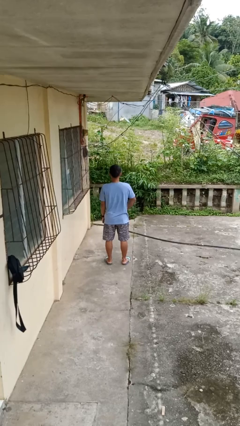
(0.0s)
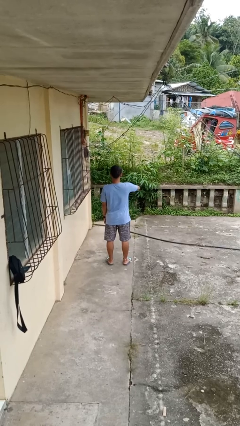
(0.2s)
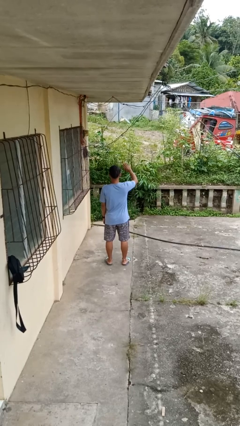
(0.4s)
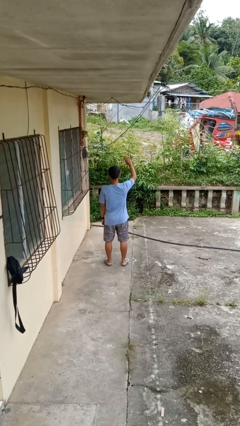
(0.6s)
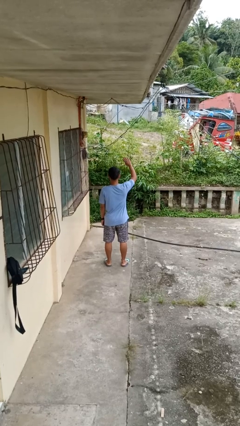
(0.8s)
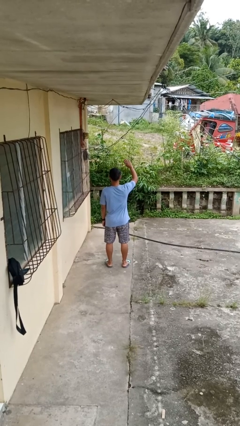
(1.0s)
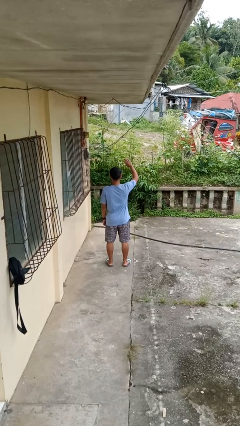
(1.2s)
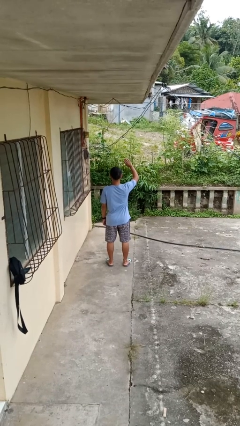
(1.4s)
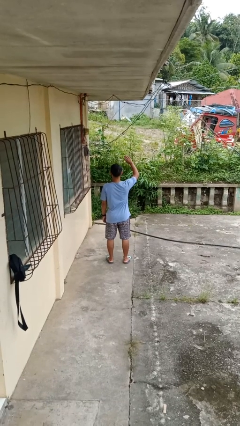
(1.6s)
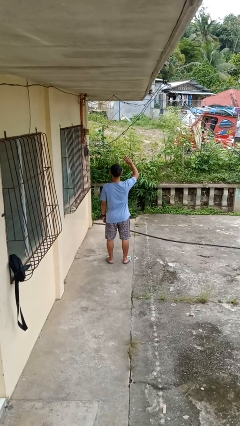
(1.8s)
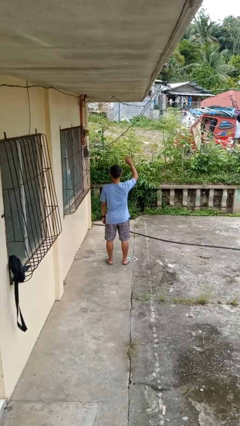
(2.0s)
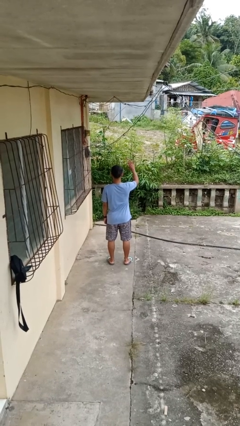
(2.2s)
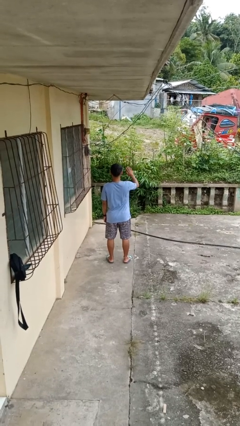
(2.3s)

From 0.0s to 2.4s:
person gestures swipe up

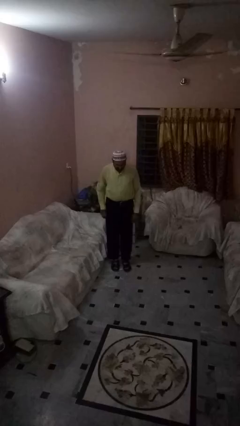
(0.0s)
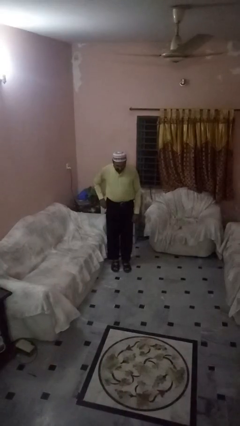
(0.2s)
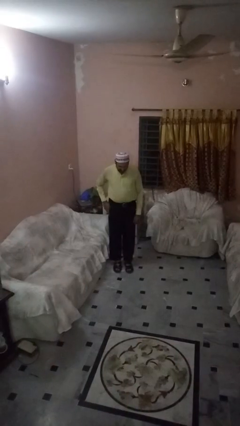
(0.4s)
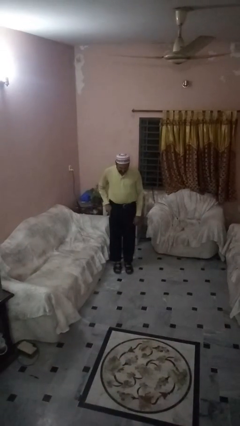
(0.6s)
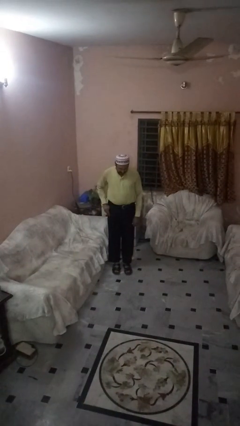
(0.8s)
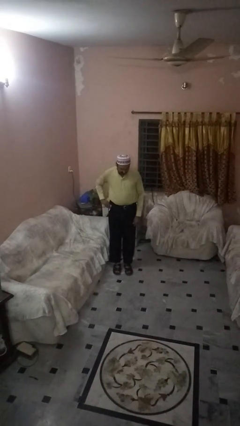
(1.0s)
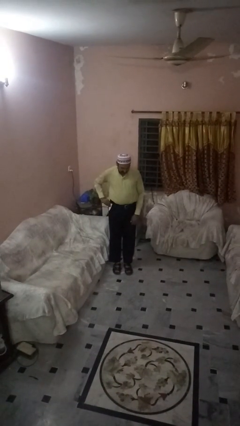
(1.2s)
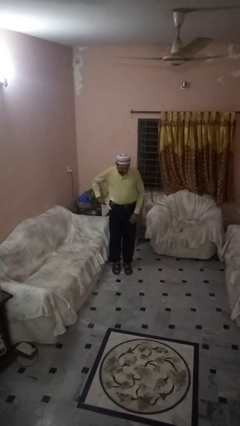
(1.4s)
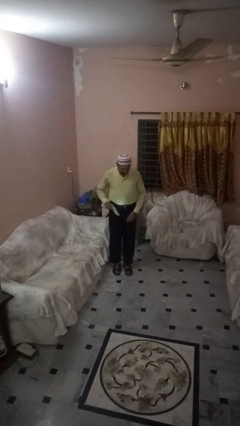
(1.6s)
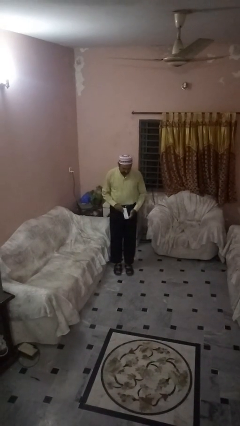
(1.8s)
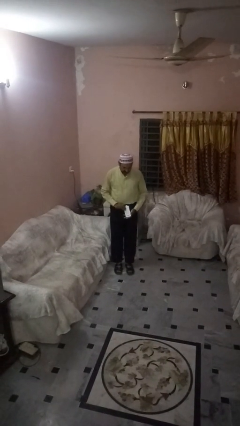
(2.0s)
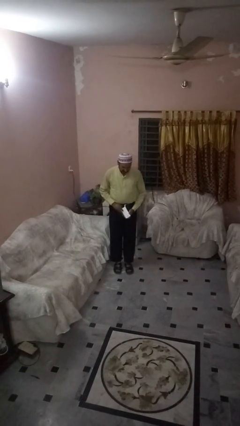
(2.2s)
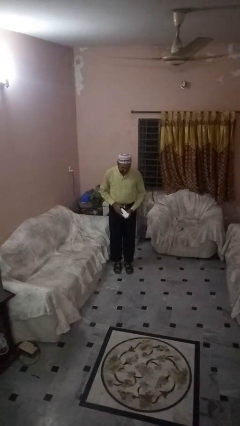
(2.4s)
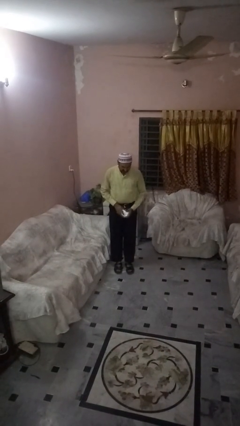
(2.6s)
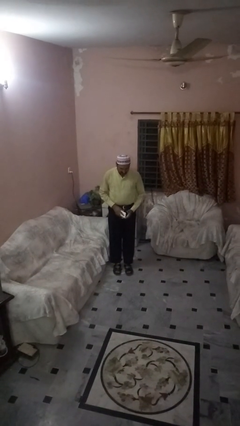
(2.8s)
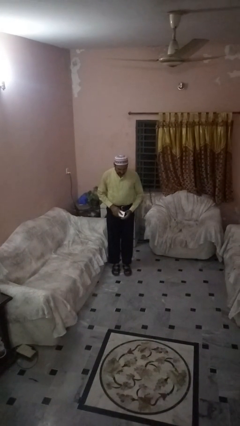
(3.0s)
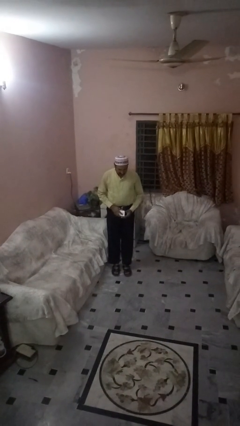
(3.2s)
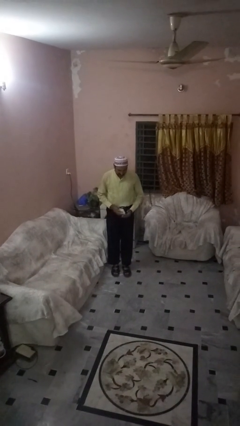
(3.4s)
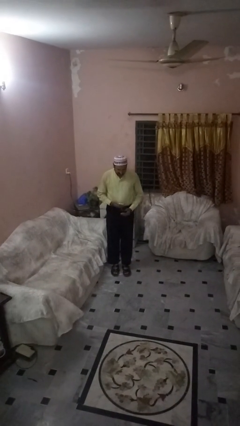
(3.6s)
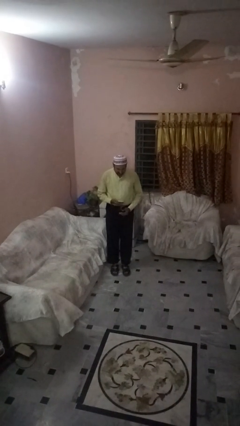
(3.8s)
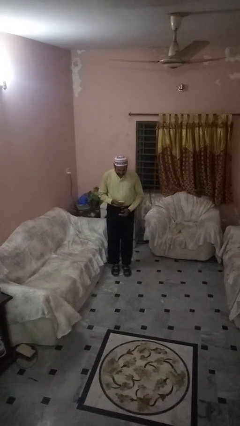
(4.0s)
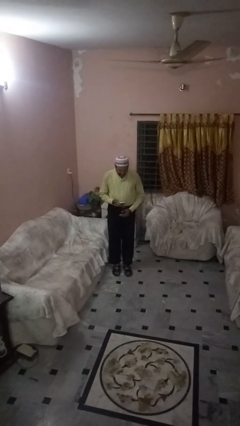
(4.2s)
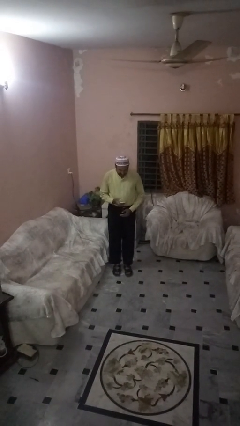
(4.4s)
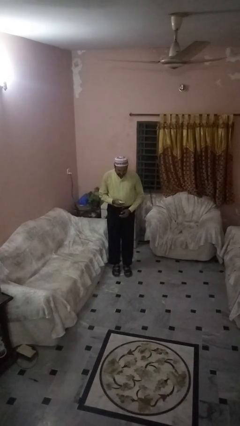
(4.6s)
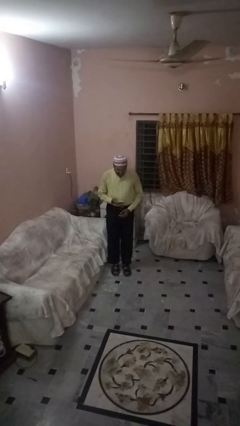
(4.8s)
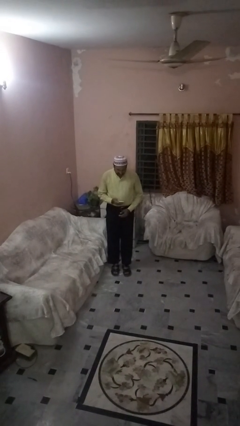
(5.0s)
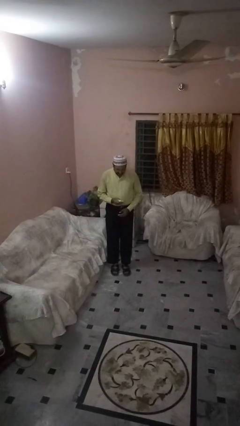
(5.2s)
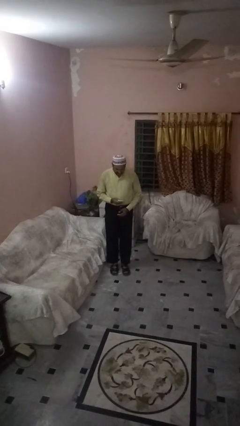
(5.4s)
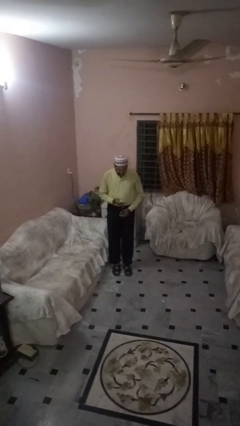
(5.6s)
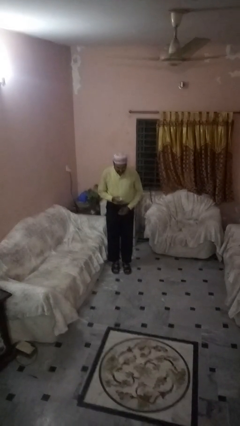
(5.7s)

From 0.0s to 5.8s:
person takes phone from pocket

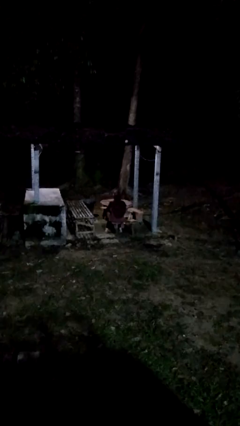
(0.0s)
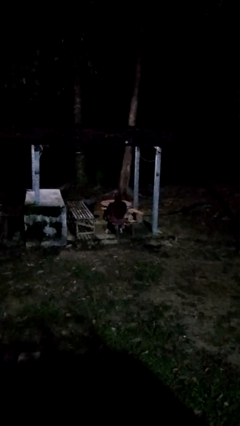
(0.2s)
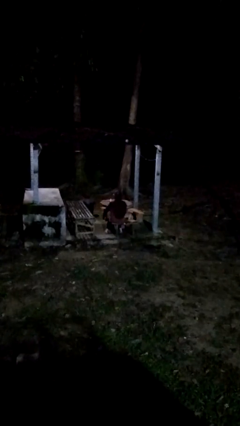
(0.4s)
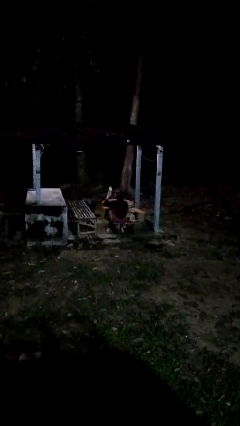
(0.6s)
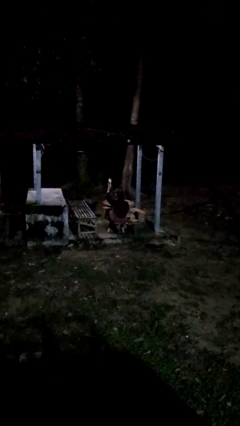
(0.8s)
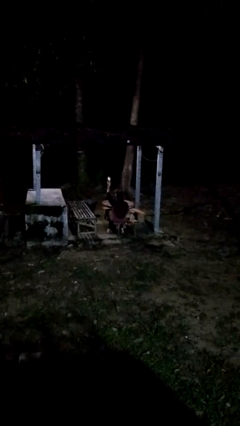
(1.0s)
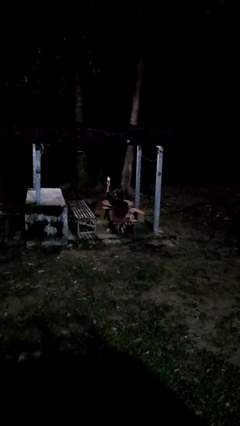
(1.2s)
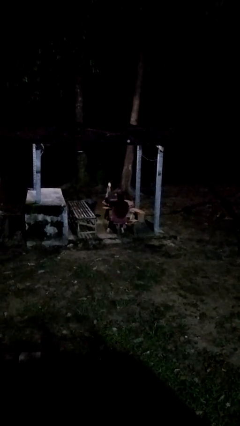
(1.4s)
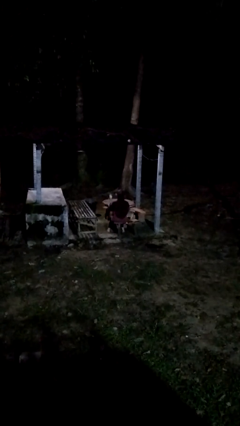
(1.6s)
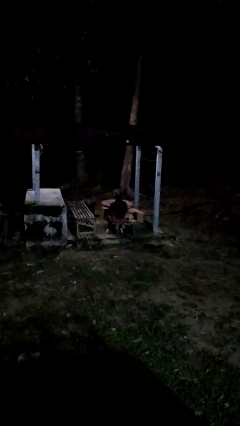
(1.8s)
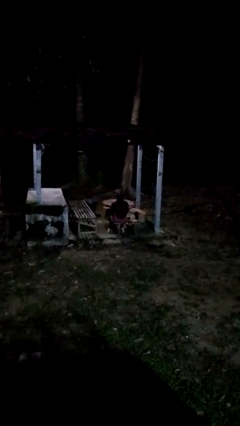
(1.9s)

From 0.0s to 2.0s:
person holds object above head

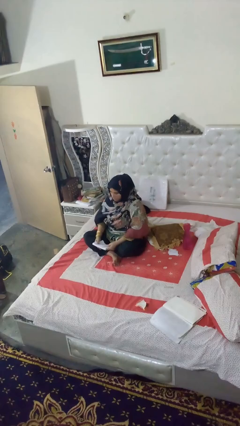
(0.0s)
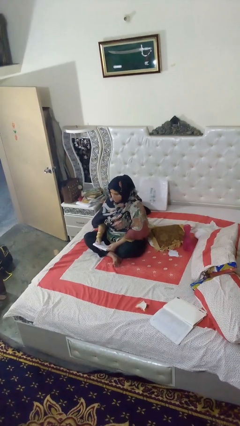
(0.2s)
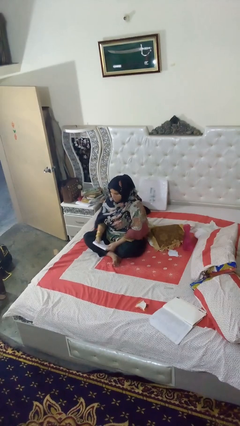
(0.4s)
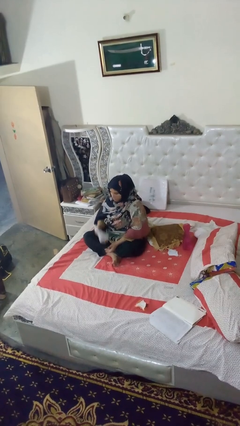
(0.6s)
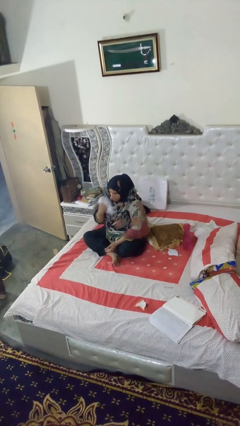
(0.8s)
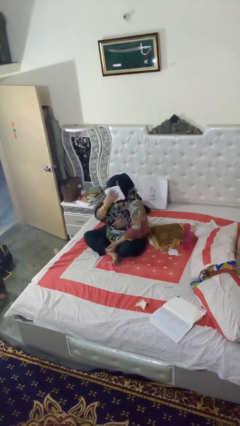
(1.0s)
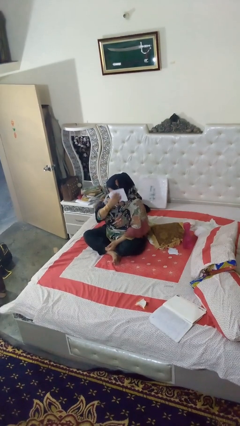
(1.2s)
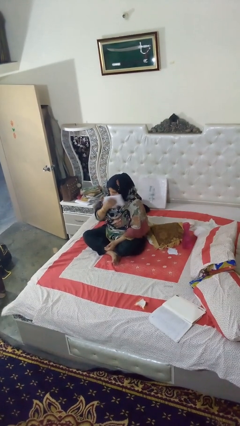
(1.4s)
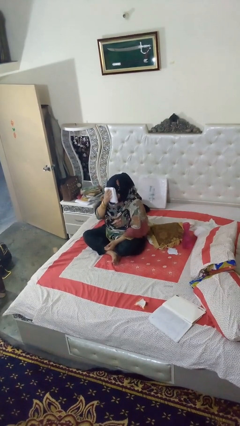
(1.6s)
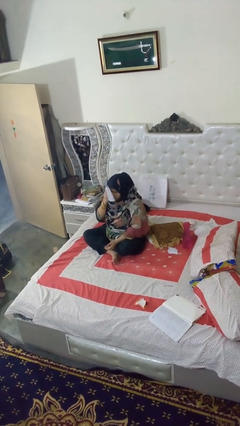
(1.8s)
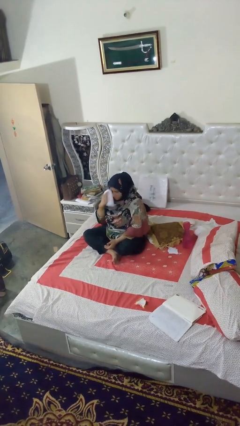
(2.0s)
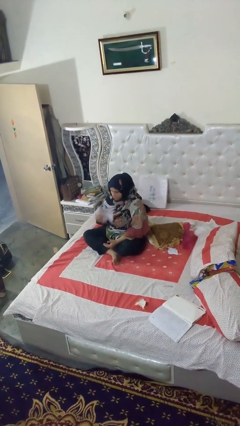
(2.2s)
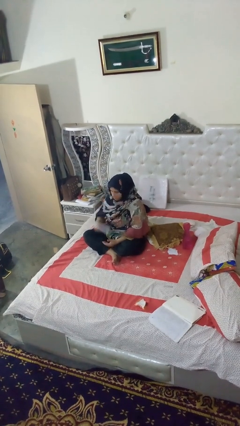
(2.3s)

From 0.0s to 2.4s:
person wipes mouth with napkin

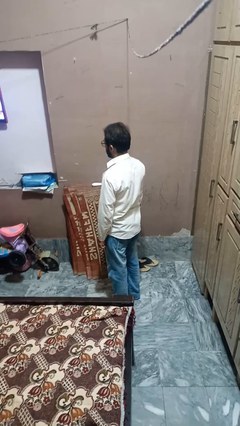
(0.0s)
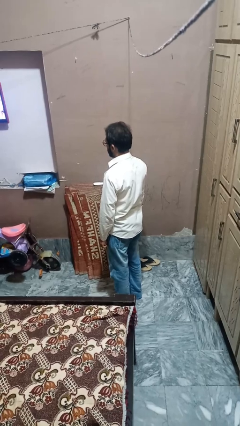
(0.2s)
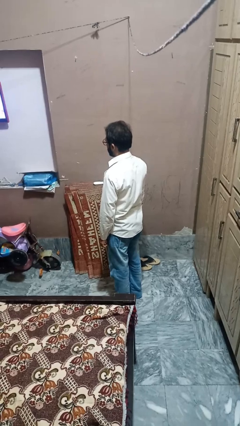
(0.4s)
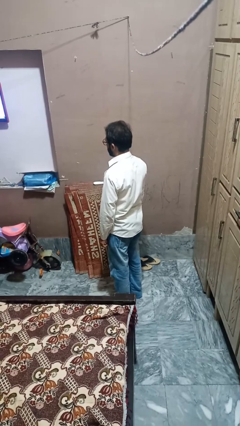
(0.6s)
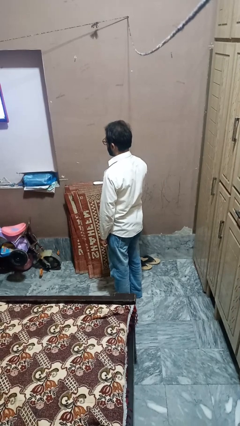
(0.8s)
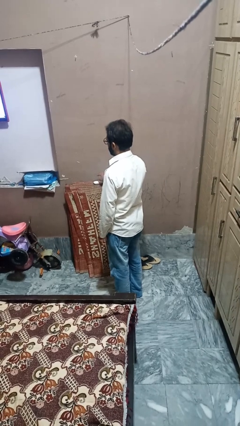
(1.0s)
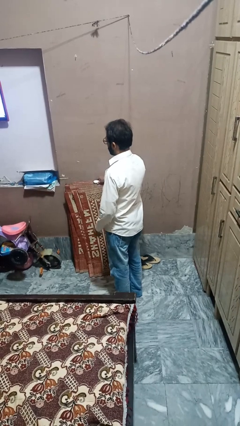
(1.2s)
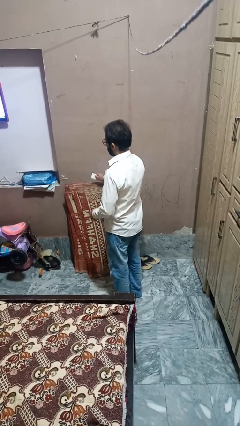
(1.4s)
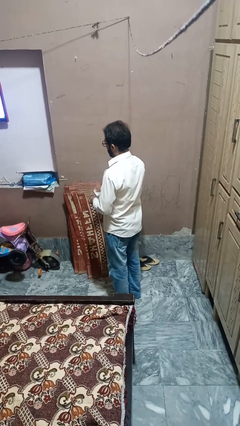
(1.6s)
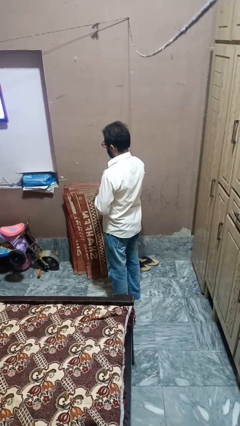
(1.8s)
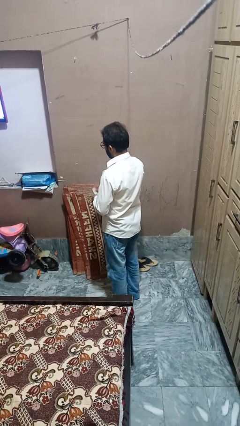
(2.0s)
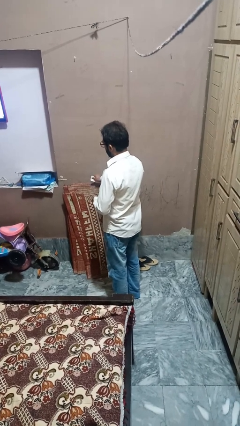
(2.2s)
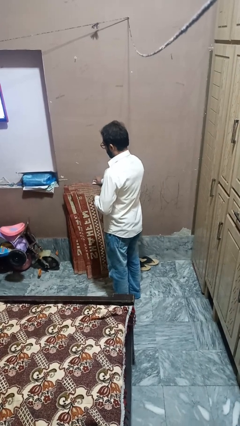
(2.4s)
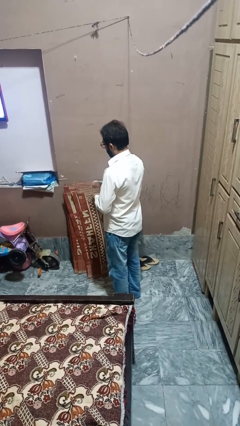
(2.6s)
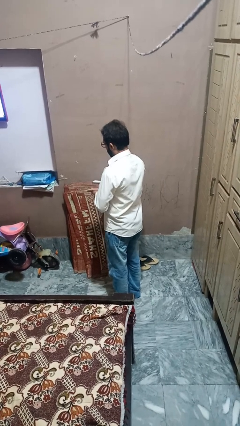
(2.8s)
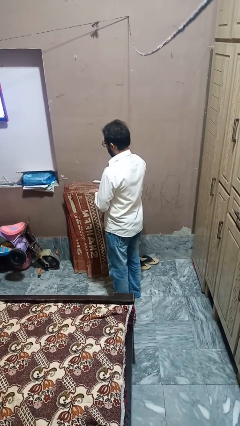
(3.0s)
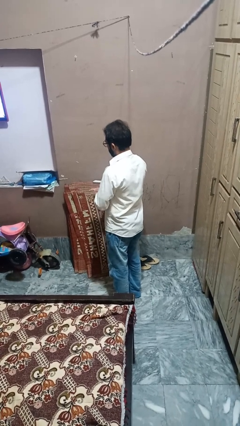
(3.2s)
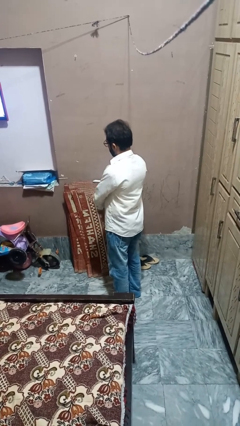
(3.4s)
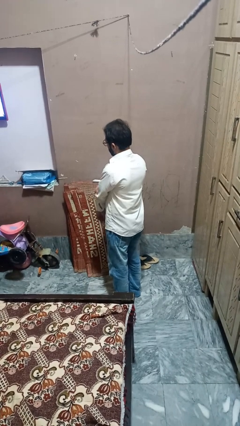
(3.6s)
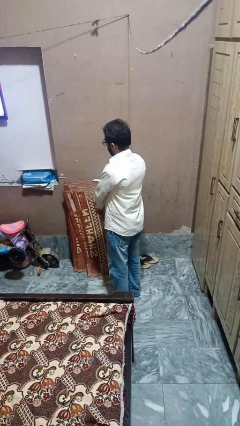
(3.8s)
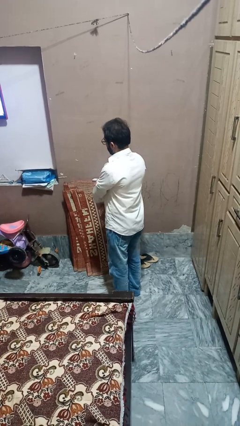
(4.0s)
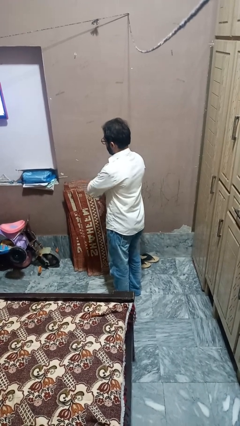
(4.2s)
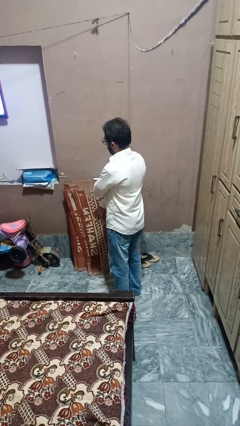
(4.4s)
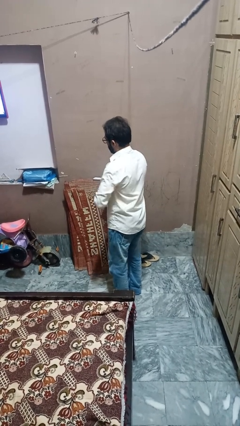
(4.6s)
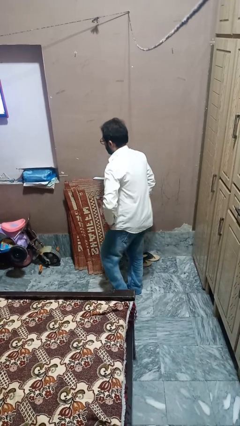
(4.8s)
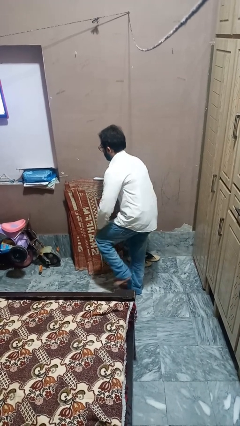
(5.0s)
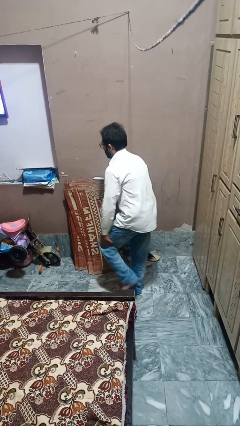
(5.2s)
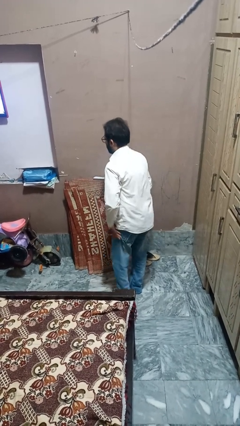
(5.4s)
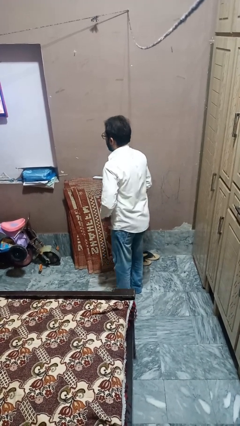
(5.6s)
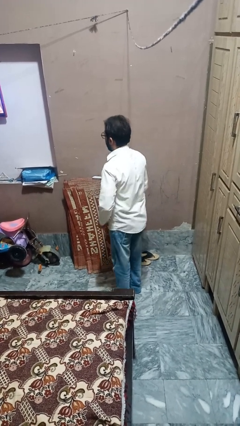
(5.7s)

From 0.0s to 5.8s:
person applies sunscreen
